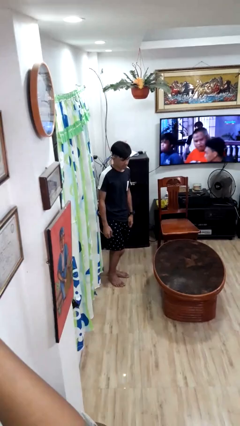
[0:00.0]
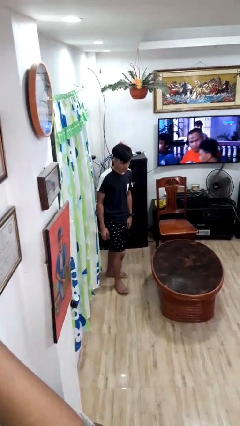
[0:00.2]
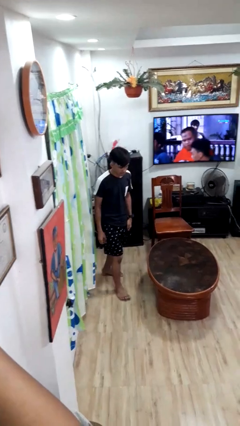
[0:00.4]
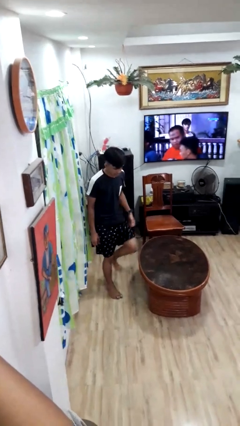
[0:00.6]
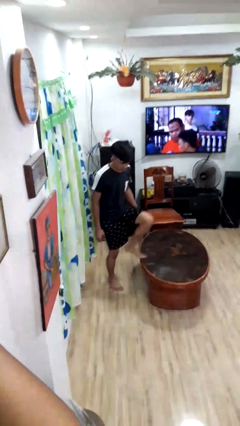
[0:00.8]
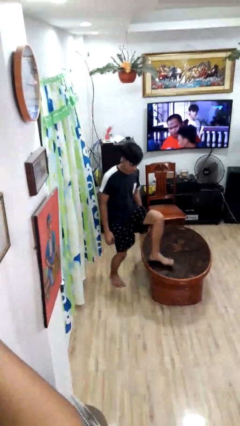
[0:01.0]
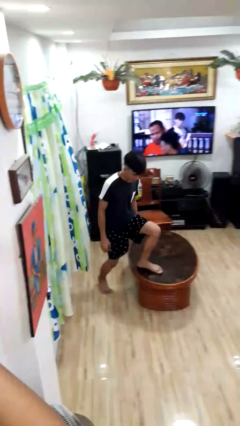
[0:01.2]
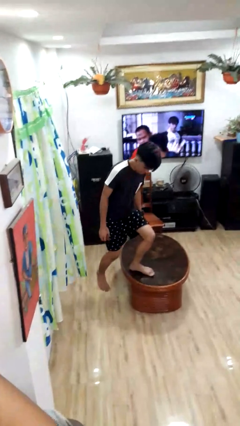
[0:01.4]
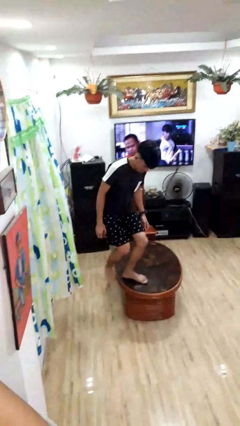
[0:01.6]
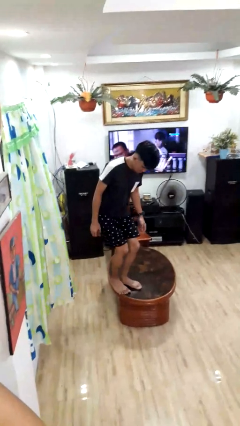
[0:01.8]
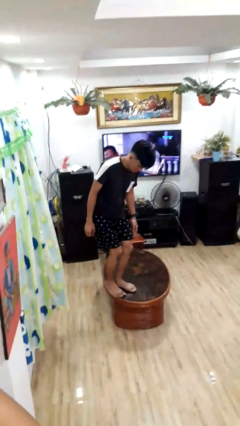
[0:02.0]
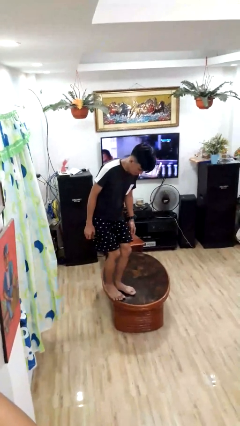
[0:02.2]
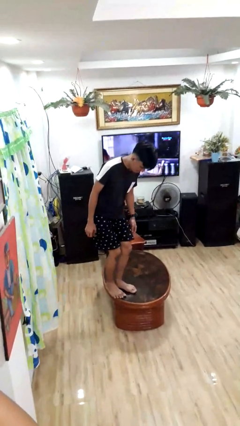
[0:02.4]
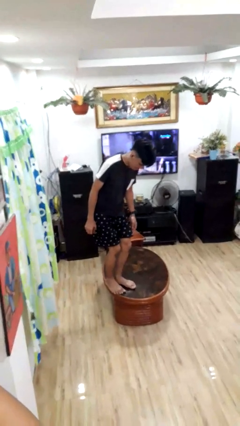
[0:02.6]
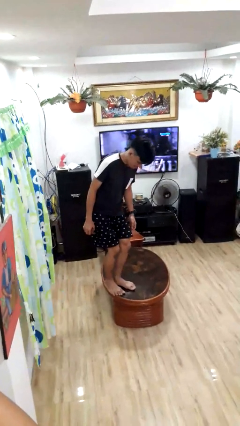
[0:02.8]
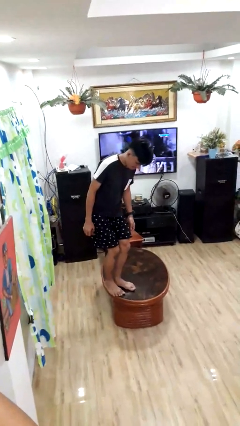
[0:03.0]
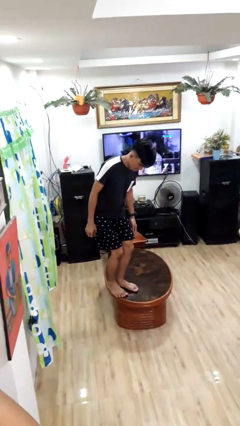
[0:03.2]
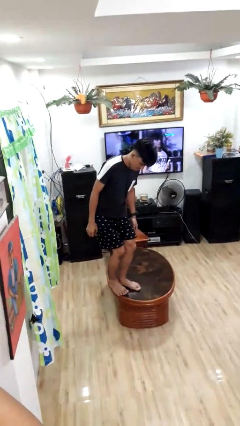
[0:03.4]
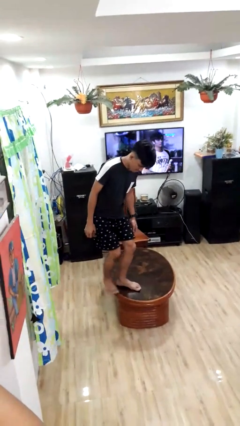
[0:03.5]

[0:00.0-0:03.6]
person climbs on table

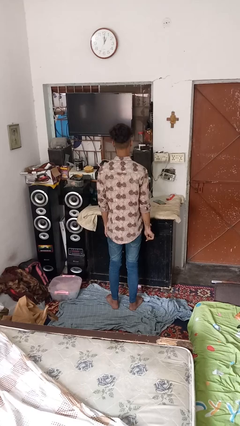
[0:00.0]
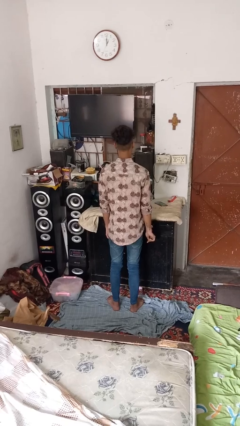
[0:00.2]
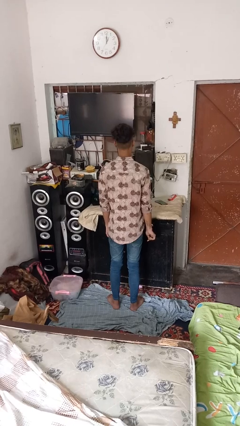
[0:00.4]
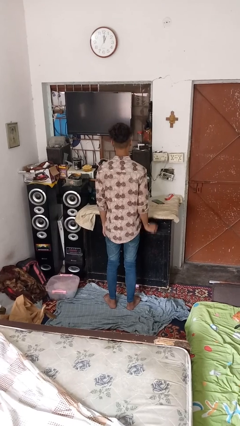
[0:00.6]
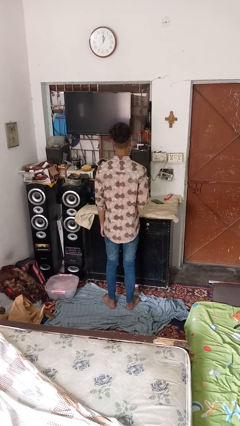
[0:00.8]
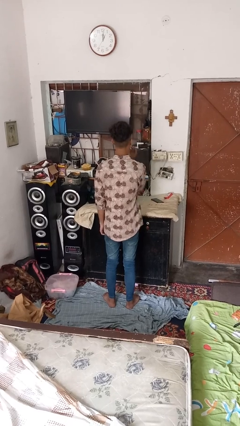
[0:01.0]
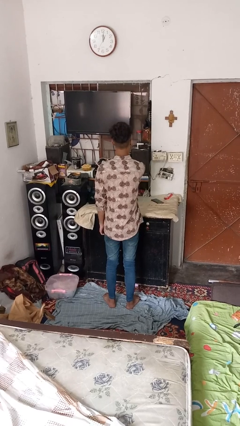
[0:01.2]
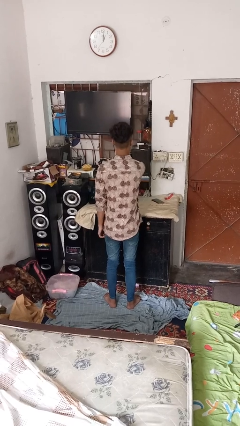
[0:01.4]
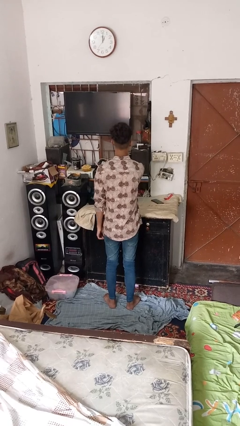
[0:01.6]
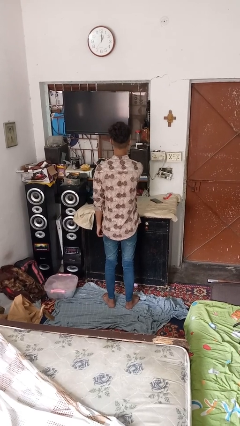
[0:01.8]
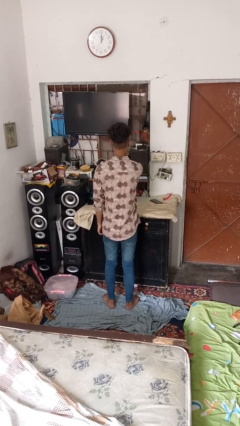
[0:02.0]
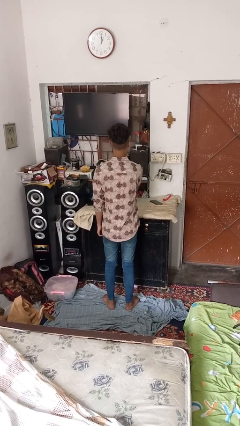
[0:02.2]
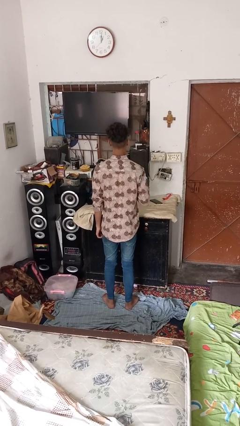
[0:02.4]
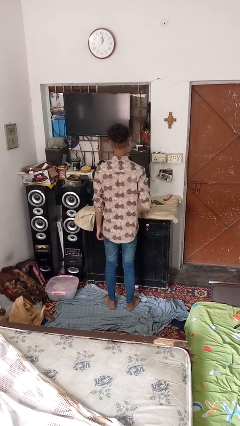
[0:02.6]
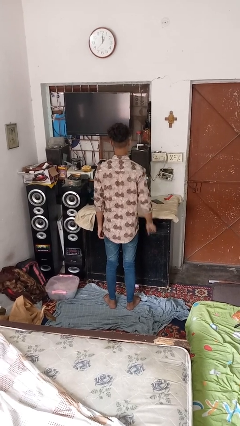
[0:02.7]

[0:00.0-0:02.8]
person applies lip makeup

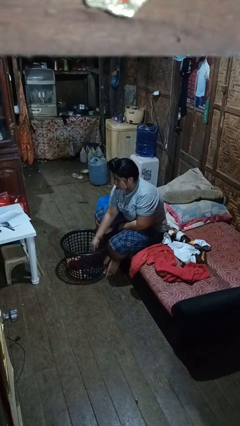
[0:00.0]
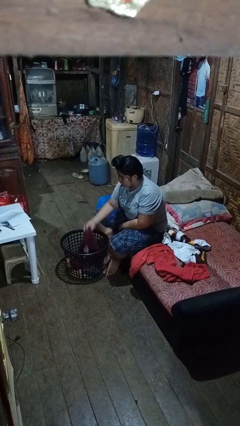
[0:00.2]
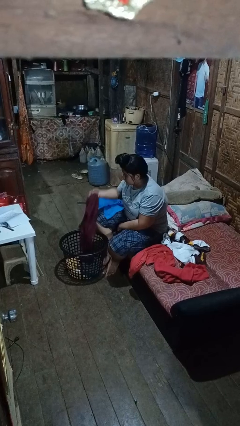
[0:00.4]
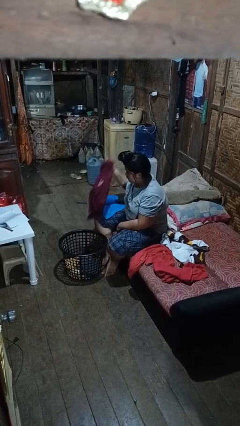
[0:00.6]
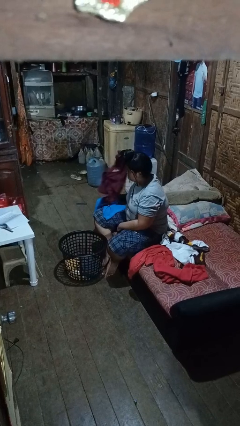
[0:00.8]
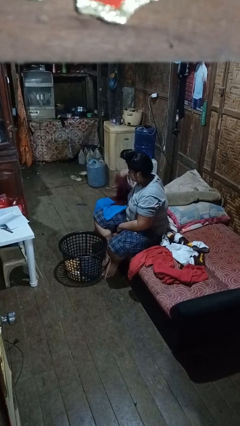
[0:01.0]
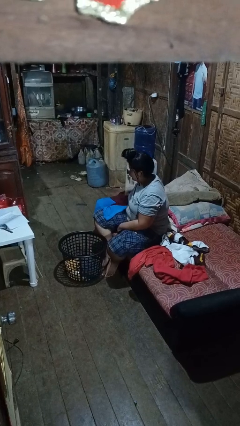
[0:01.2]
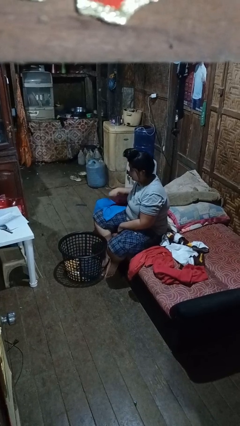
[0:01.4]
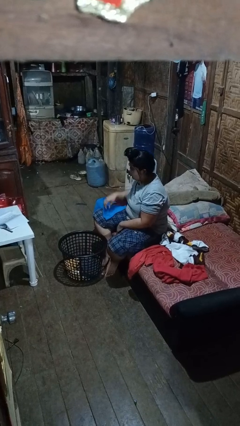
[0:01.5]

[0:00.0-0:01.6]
person takes object from basket

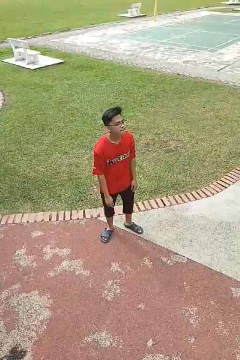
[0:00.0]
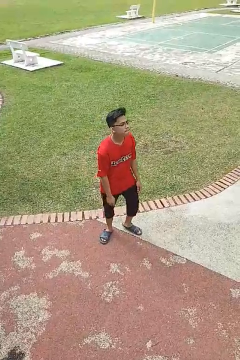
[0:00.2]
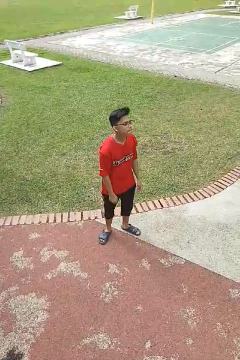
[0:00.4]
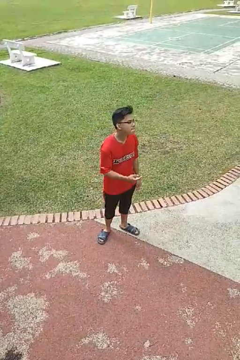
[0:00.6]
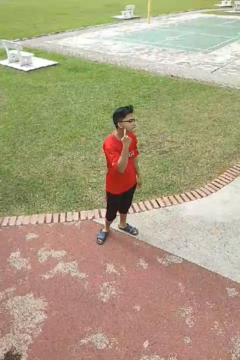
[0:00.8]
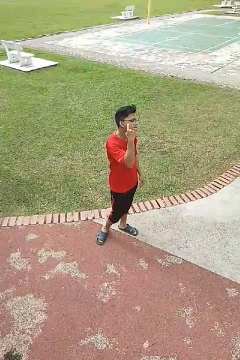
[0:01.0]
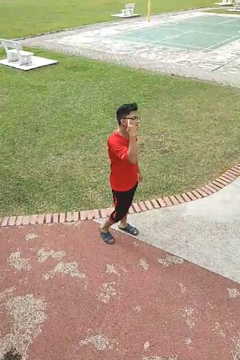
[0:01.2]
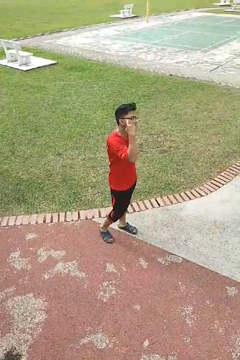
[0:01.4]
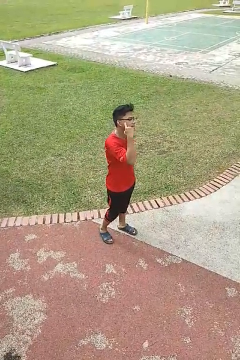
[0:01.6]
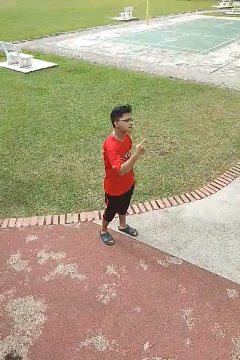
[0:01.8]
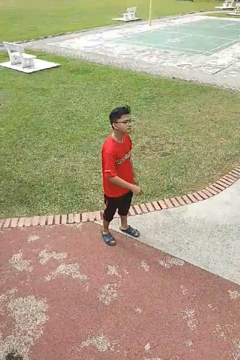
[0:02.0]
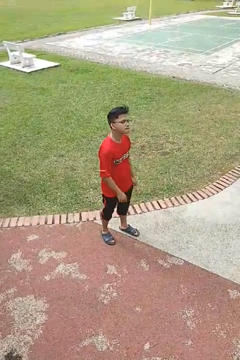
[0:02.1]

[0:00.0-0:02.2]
person gestures listen closely

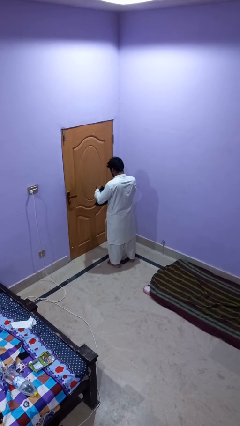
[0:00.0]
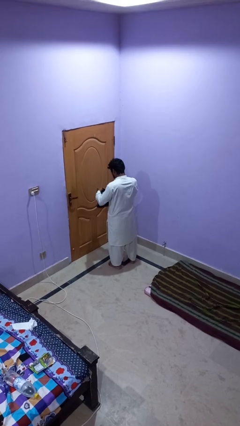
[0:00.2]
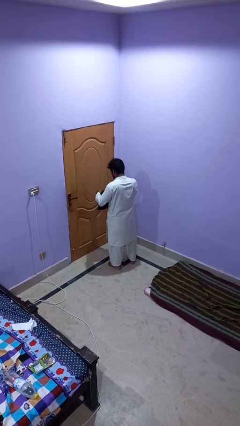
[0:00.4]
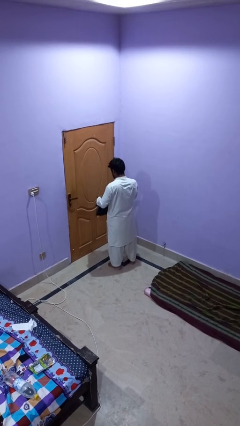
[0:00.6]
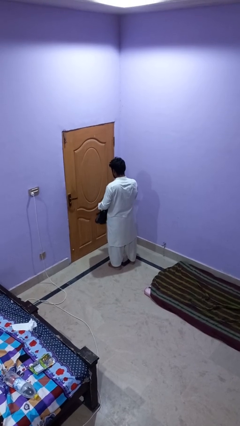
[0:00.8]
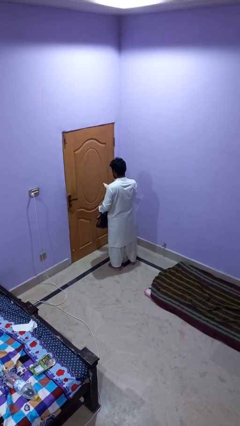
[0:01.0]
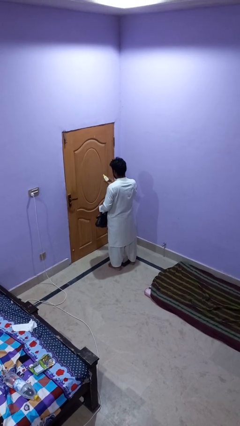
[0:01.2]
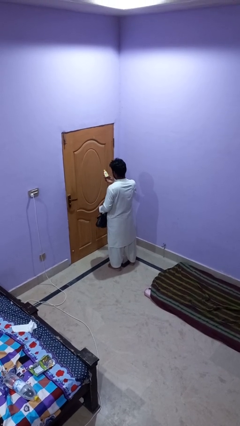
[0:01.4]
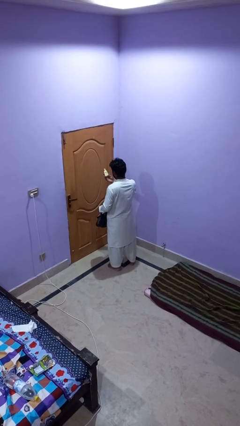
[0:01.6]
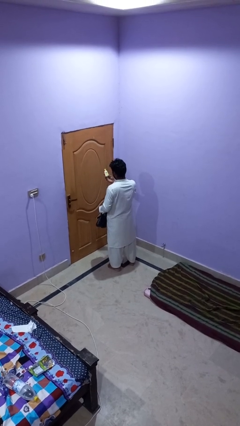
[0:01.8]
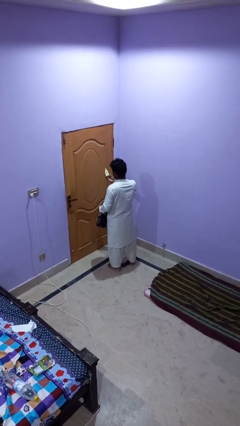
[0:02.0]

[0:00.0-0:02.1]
person takes object from purse

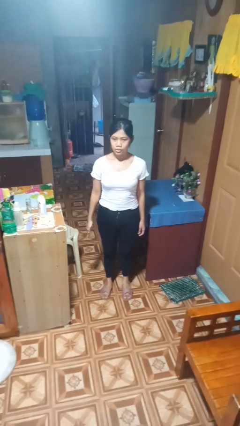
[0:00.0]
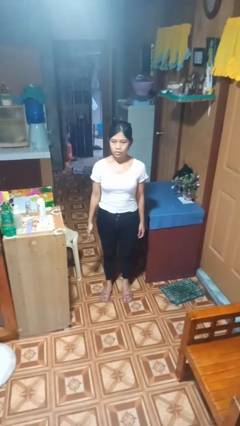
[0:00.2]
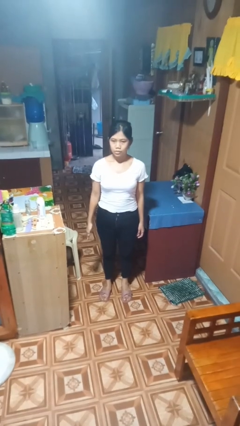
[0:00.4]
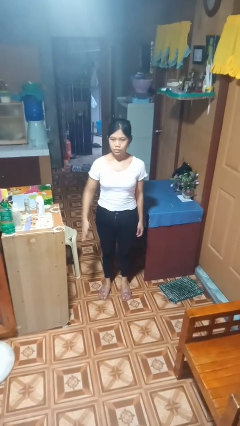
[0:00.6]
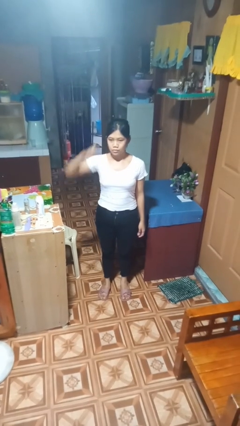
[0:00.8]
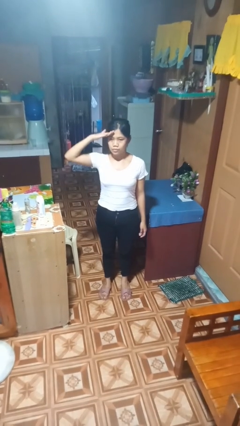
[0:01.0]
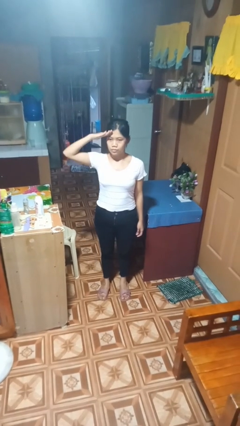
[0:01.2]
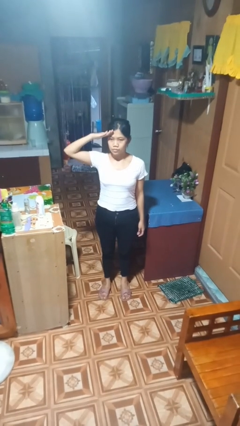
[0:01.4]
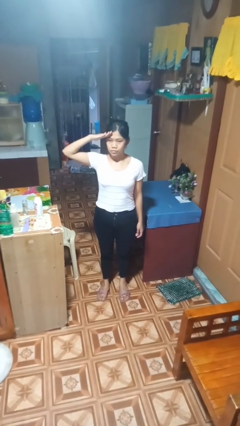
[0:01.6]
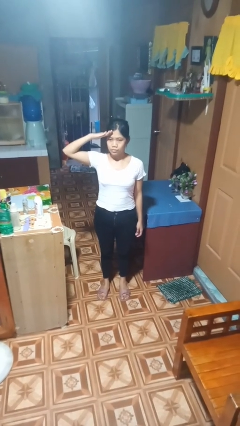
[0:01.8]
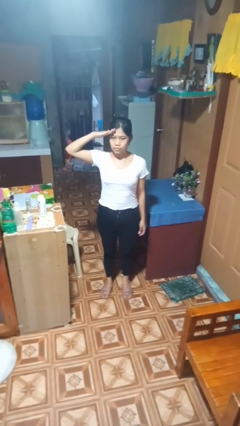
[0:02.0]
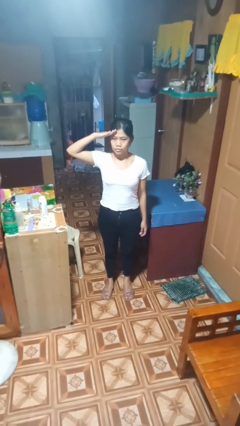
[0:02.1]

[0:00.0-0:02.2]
person salutes

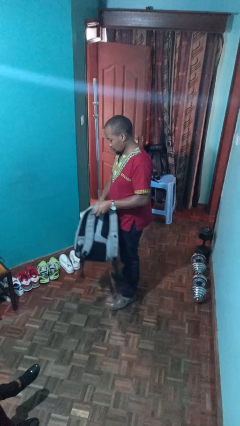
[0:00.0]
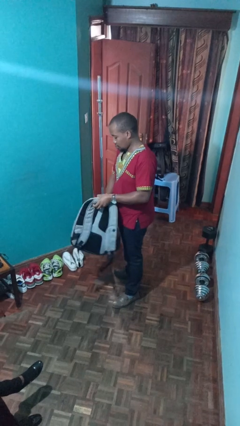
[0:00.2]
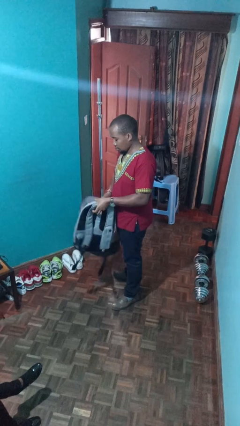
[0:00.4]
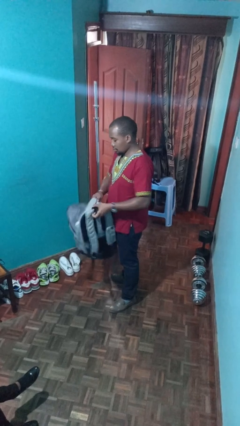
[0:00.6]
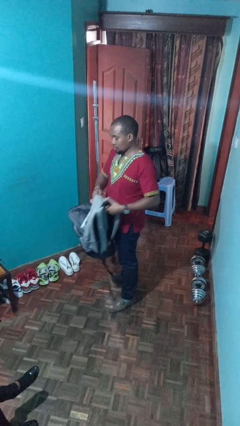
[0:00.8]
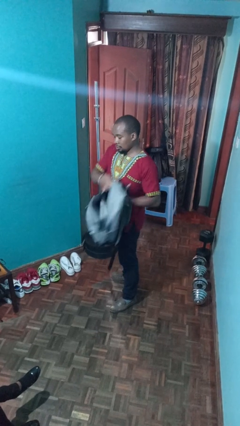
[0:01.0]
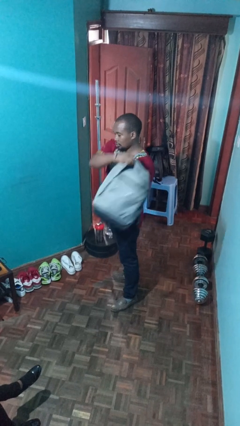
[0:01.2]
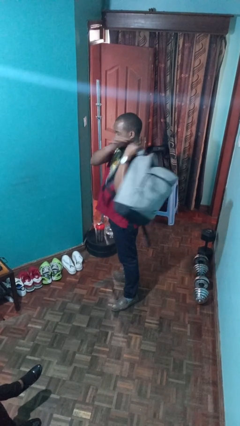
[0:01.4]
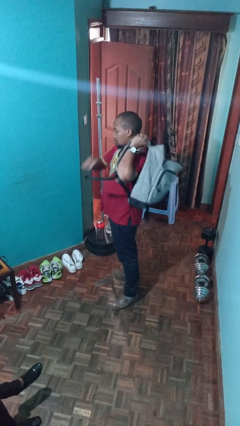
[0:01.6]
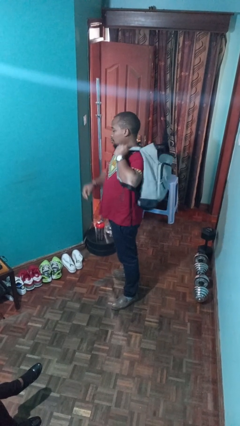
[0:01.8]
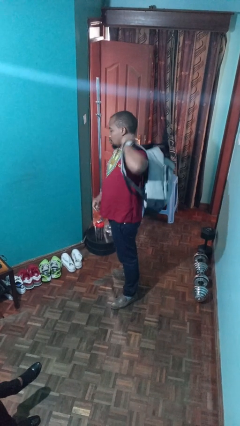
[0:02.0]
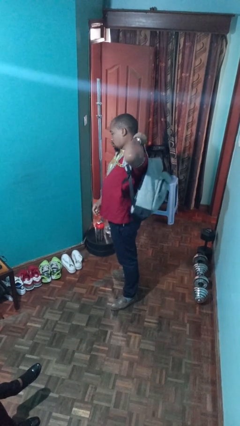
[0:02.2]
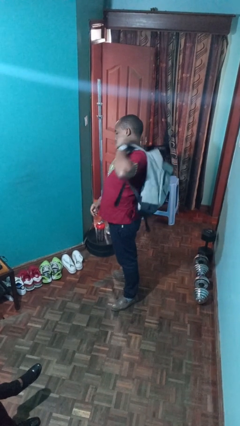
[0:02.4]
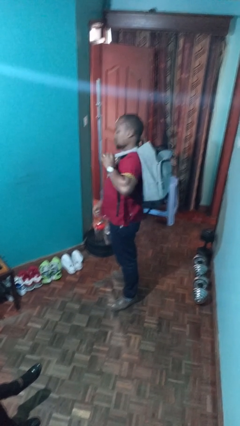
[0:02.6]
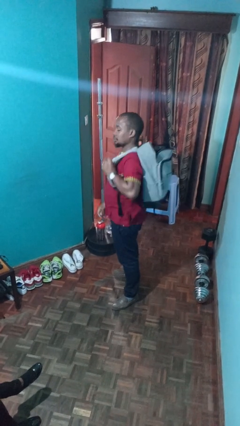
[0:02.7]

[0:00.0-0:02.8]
person puts object into backpack

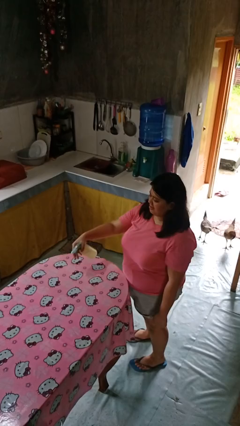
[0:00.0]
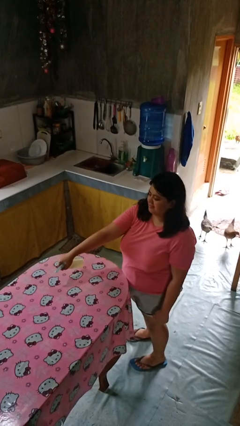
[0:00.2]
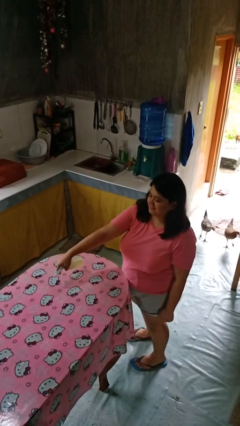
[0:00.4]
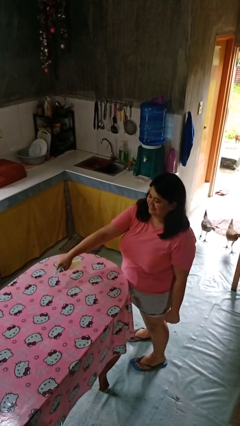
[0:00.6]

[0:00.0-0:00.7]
person sprays from bottle
